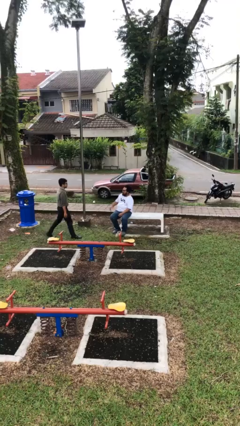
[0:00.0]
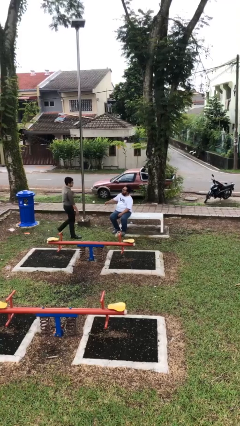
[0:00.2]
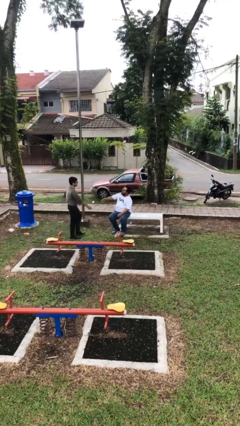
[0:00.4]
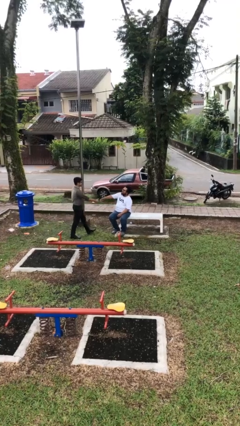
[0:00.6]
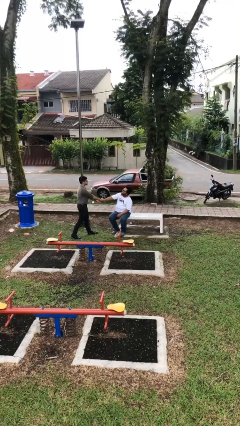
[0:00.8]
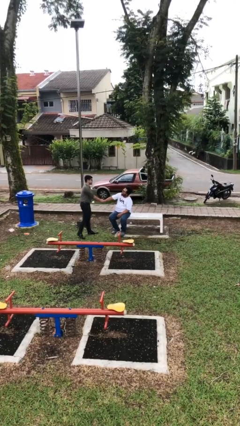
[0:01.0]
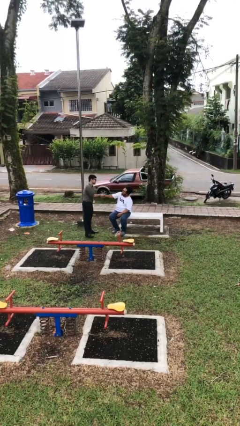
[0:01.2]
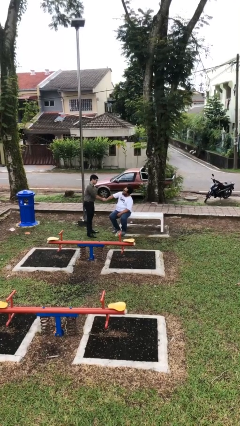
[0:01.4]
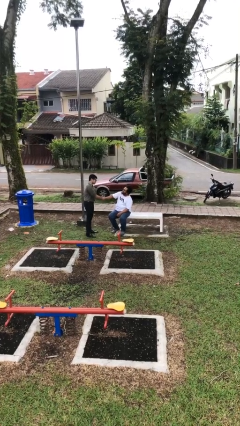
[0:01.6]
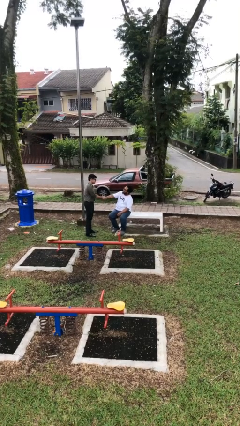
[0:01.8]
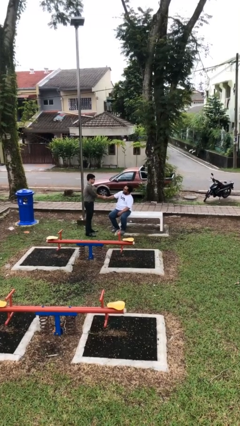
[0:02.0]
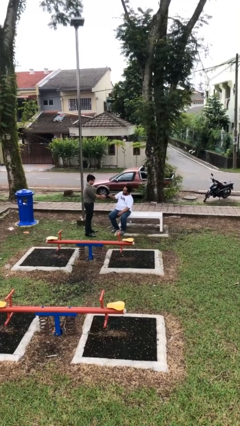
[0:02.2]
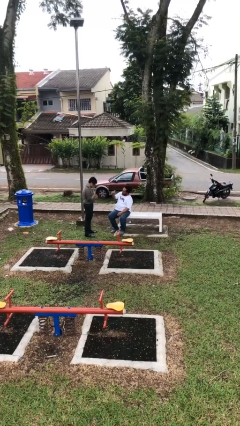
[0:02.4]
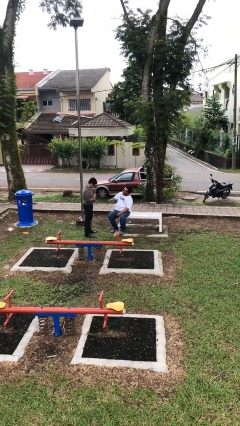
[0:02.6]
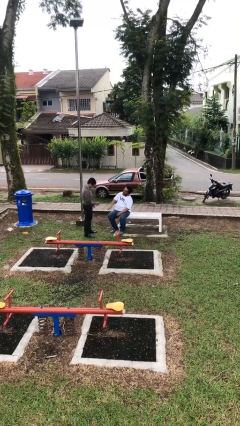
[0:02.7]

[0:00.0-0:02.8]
person shakes hand

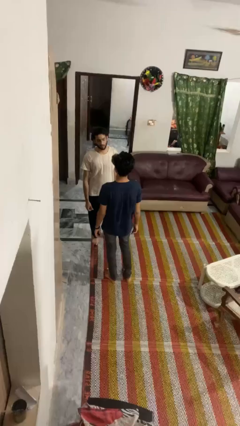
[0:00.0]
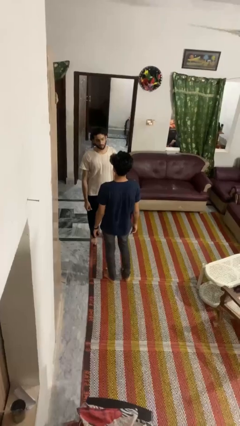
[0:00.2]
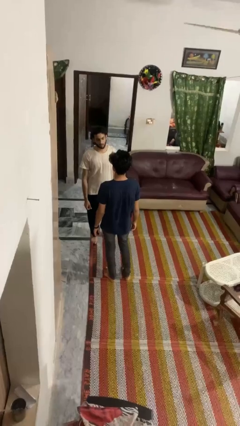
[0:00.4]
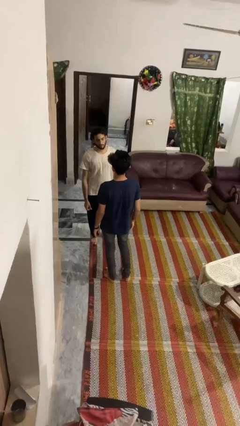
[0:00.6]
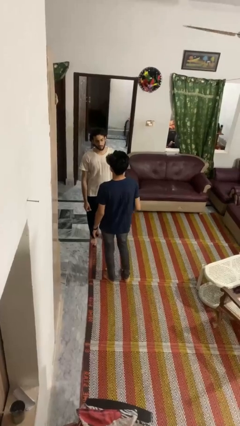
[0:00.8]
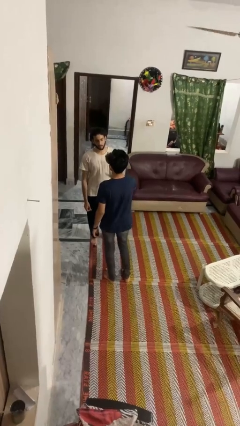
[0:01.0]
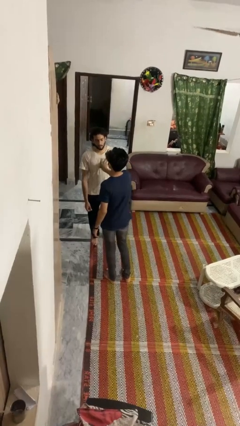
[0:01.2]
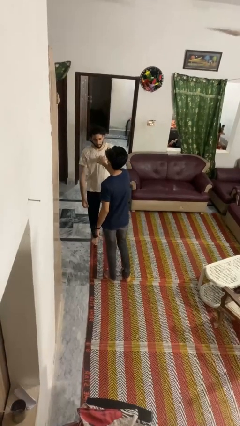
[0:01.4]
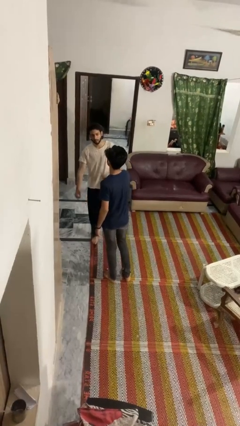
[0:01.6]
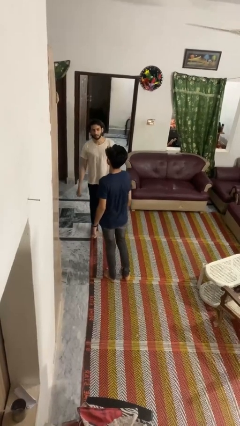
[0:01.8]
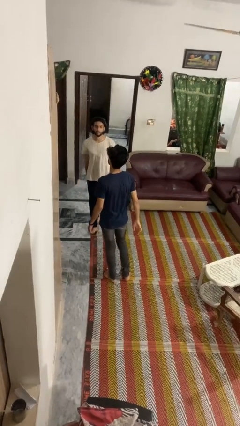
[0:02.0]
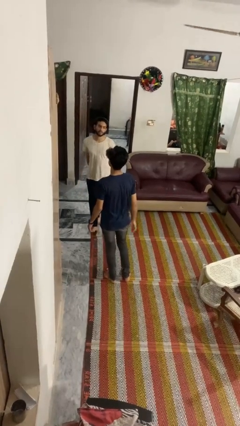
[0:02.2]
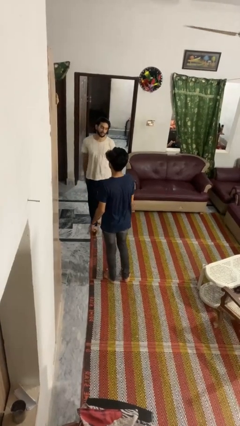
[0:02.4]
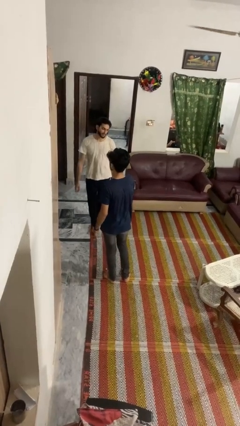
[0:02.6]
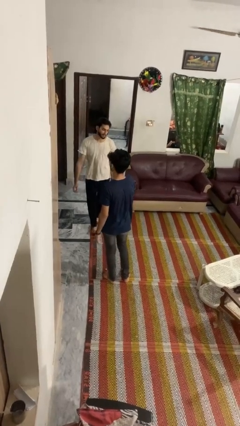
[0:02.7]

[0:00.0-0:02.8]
person shoves person

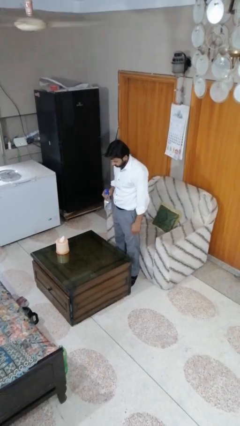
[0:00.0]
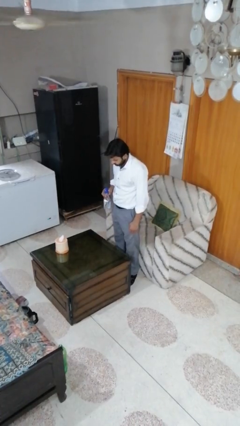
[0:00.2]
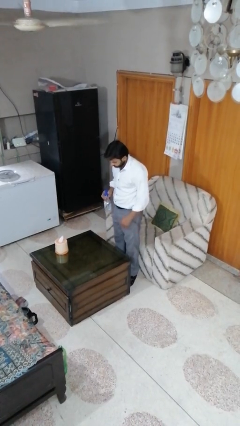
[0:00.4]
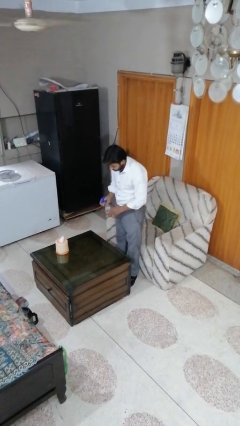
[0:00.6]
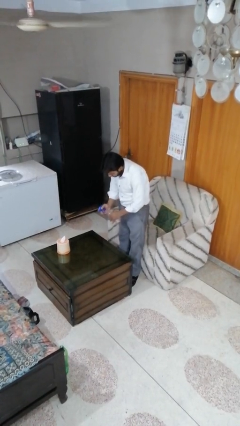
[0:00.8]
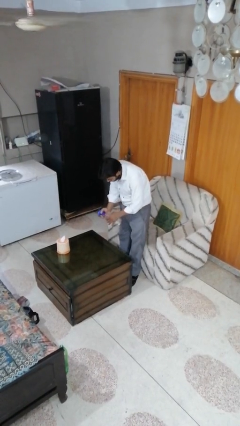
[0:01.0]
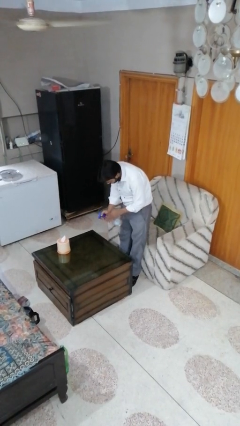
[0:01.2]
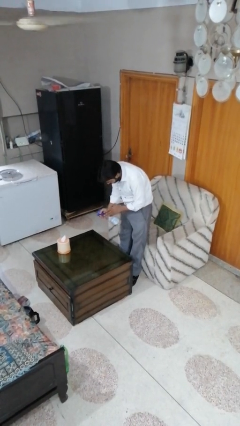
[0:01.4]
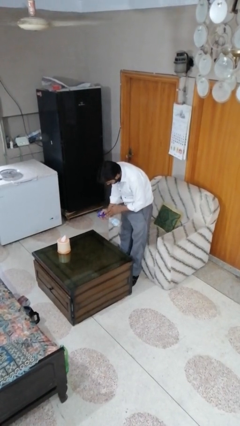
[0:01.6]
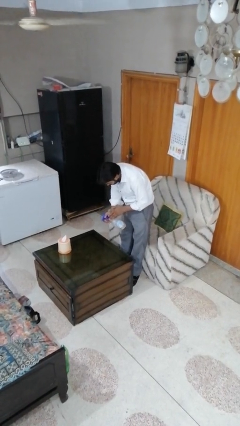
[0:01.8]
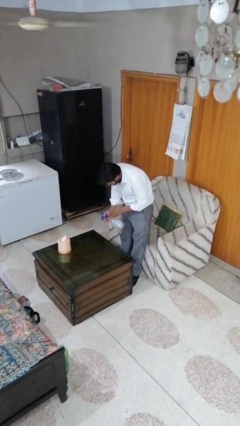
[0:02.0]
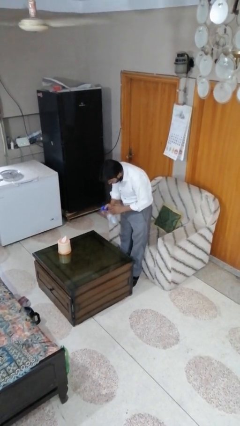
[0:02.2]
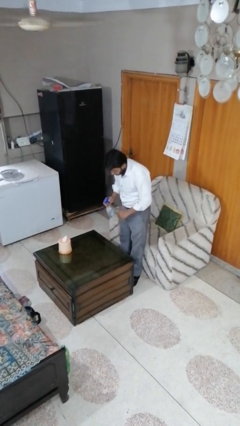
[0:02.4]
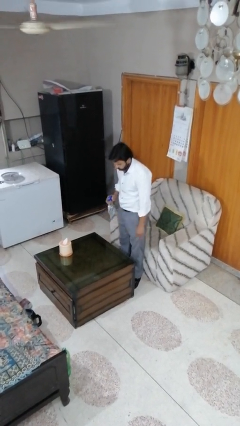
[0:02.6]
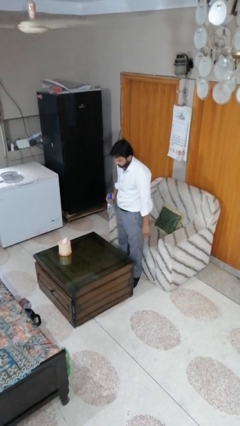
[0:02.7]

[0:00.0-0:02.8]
person sprays from bottle

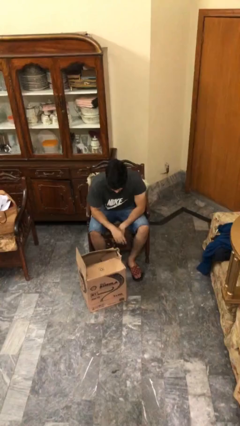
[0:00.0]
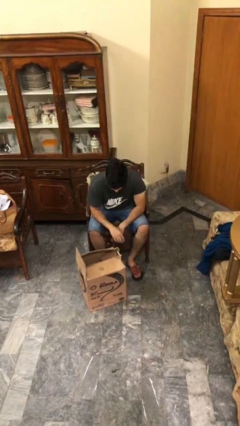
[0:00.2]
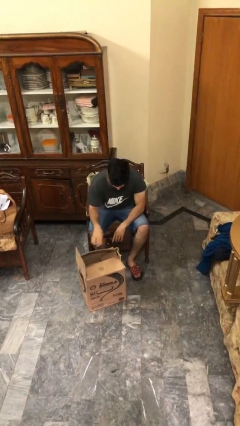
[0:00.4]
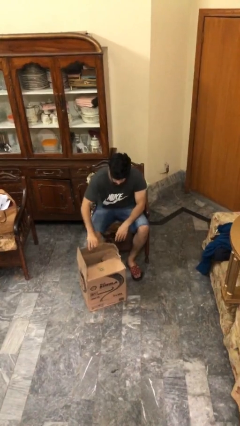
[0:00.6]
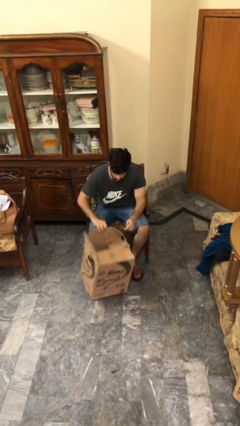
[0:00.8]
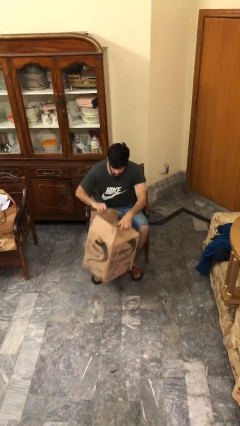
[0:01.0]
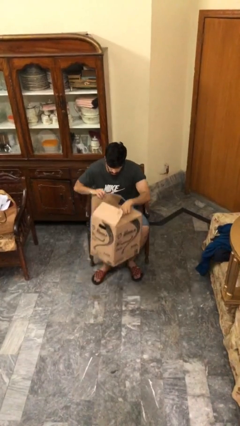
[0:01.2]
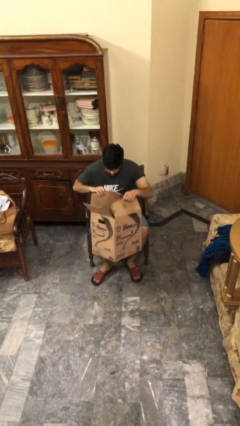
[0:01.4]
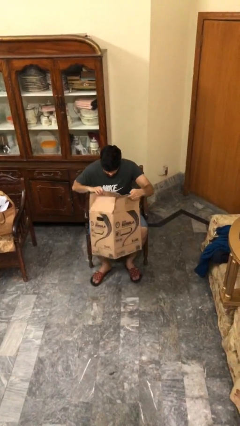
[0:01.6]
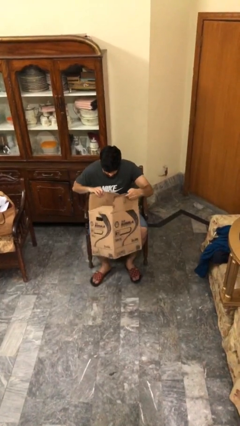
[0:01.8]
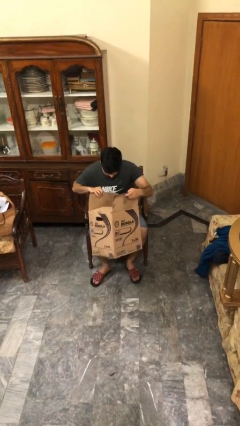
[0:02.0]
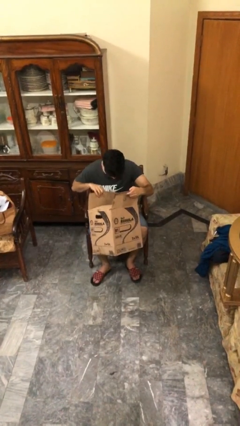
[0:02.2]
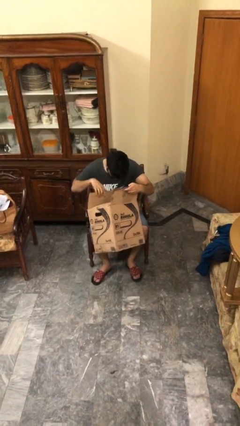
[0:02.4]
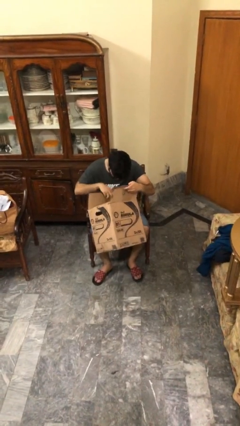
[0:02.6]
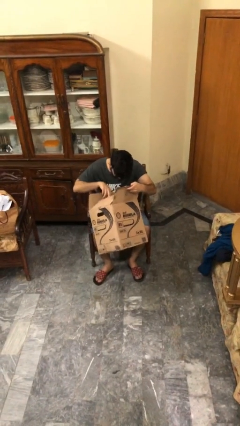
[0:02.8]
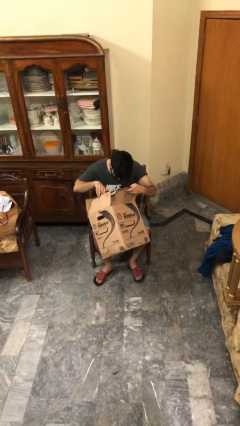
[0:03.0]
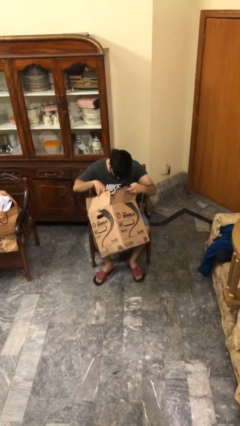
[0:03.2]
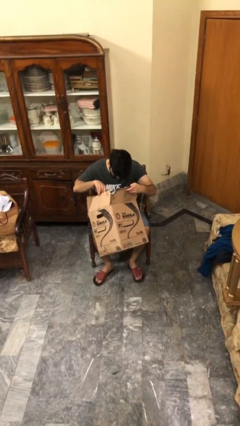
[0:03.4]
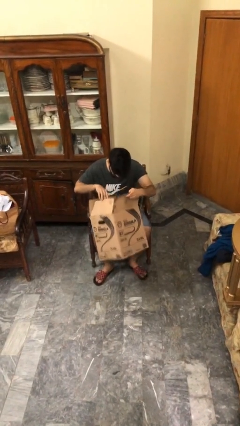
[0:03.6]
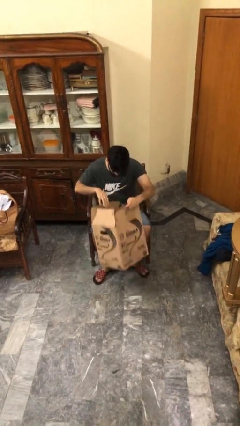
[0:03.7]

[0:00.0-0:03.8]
person searches in box

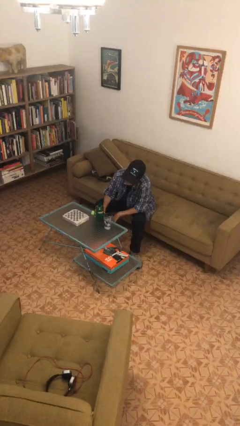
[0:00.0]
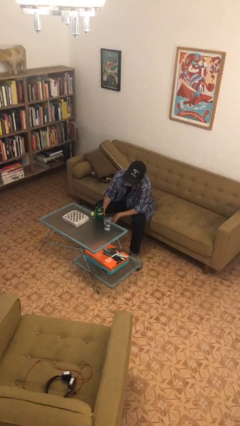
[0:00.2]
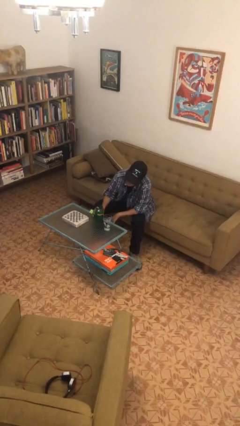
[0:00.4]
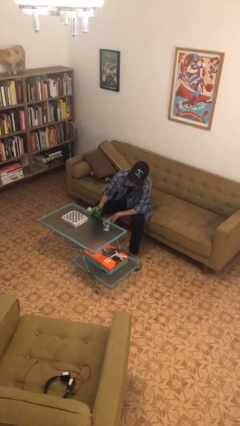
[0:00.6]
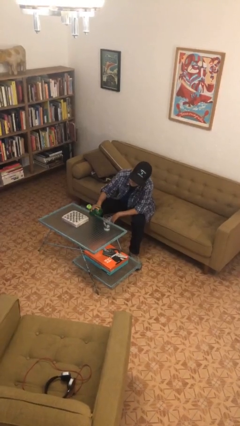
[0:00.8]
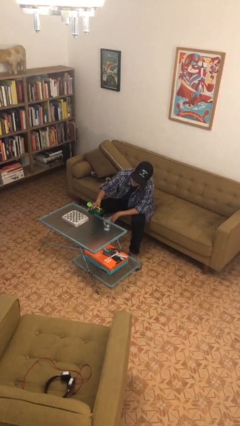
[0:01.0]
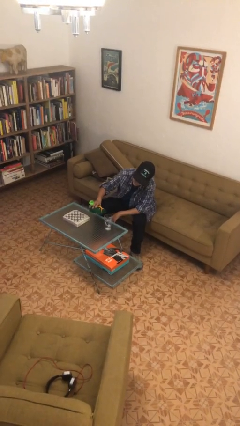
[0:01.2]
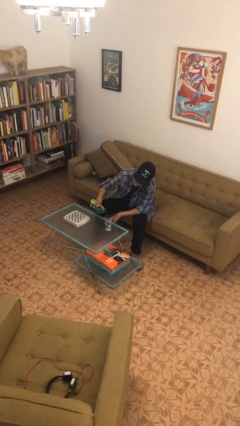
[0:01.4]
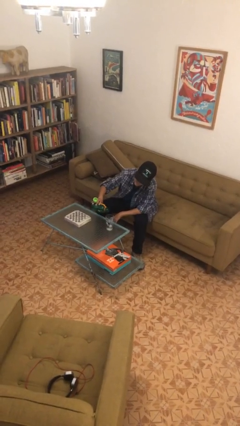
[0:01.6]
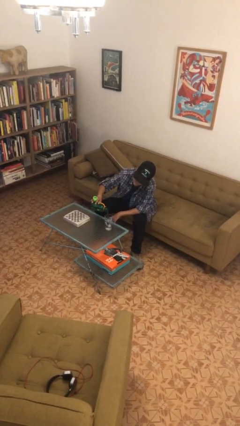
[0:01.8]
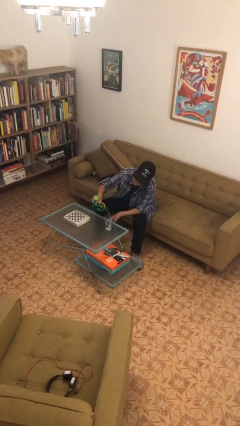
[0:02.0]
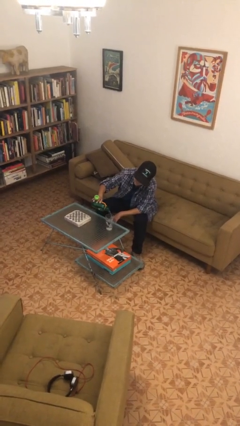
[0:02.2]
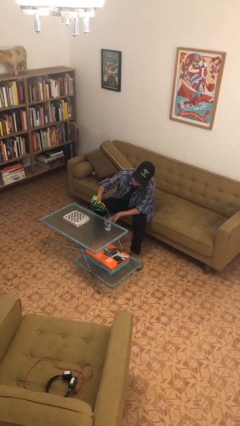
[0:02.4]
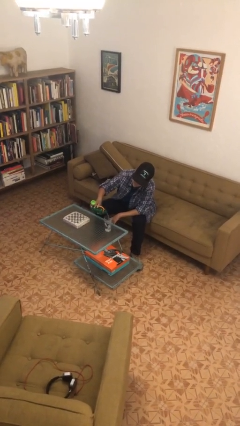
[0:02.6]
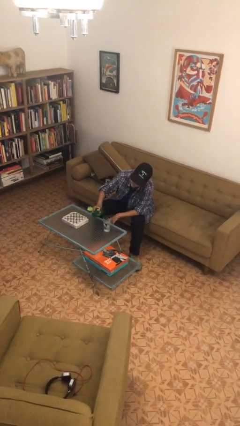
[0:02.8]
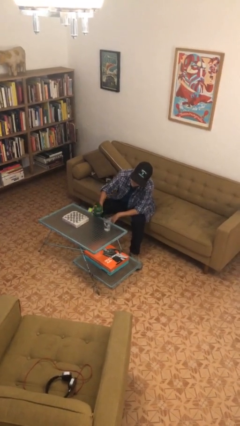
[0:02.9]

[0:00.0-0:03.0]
person pours liquid into cup

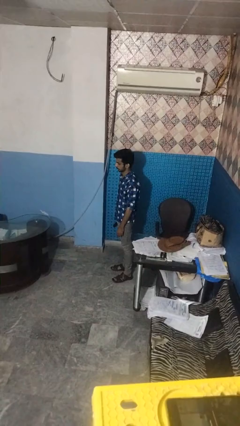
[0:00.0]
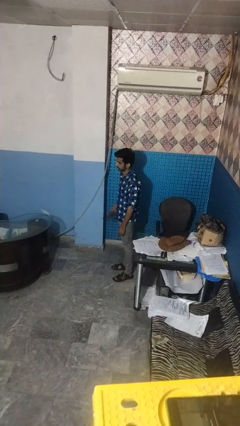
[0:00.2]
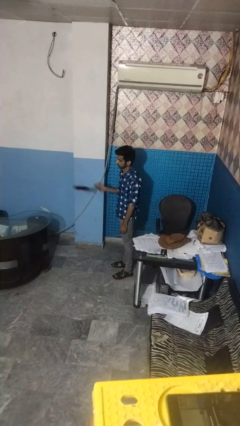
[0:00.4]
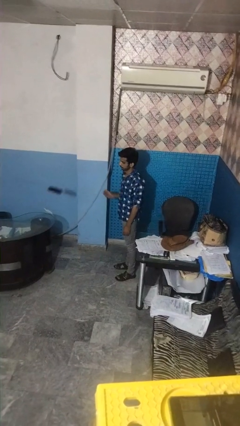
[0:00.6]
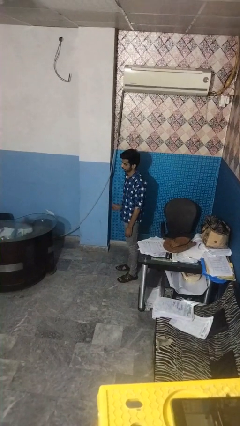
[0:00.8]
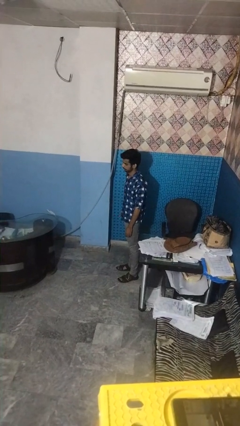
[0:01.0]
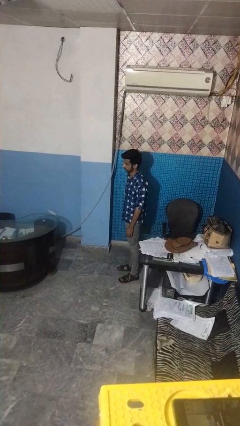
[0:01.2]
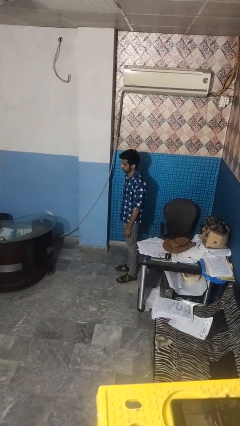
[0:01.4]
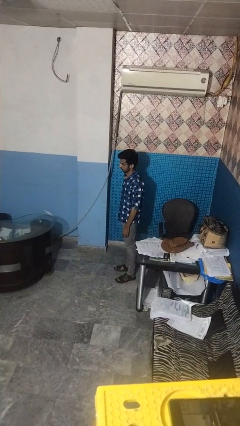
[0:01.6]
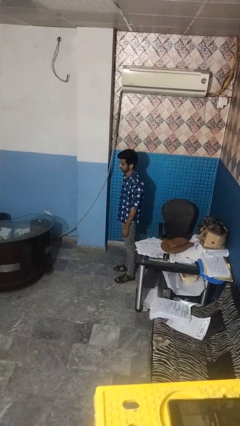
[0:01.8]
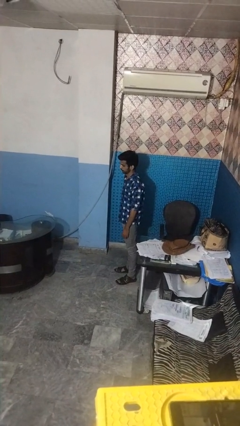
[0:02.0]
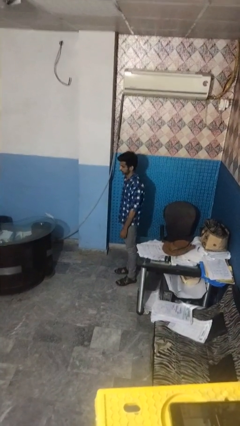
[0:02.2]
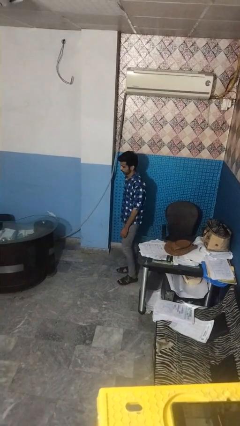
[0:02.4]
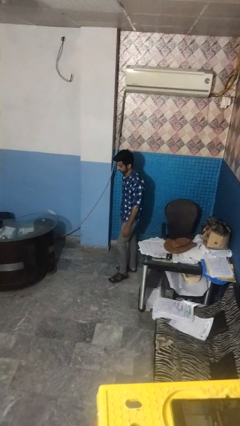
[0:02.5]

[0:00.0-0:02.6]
person throws object on table
